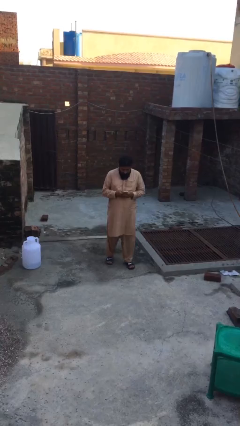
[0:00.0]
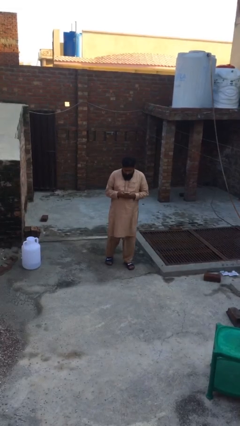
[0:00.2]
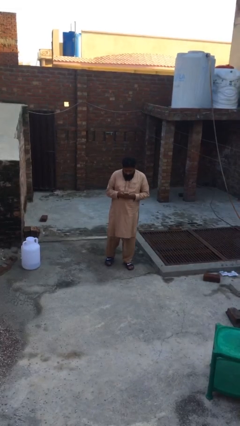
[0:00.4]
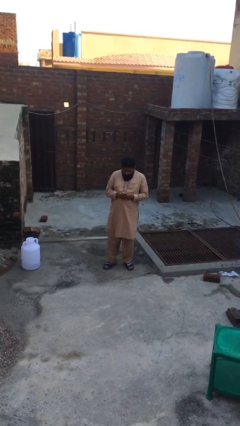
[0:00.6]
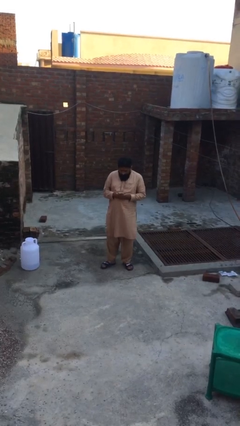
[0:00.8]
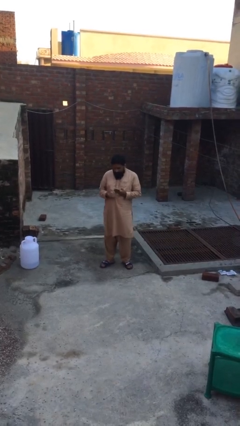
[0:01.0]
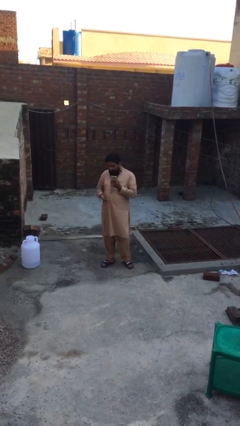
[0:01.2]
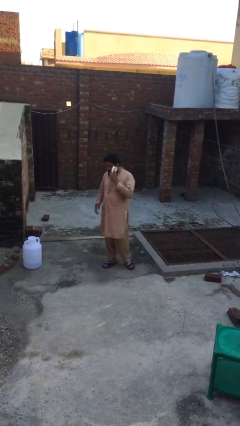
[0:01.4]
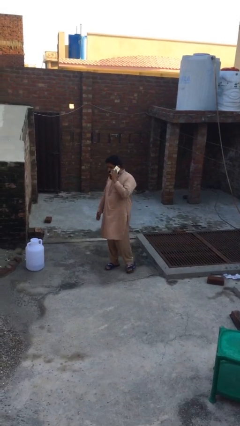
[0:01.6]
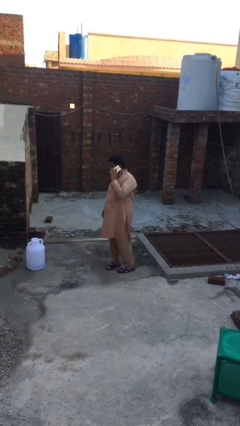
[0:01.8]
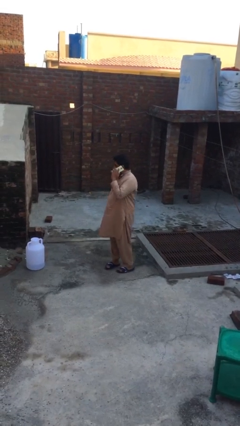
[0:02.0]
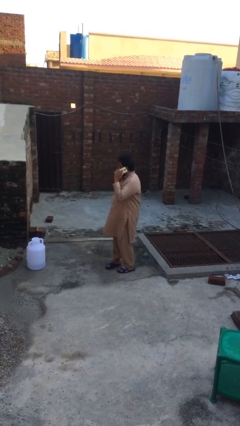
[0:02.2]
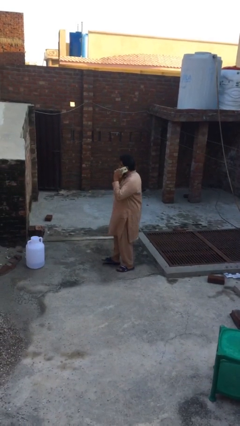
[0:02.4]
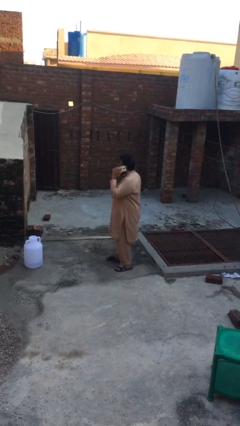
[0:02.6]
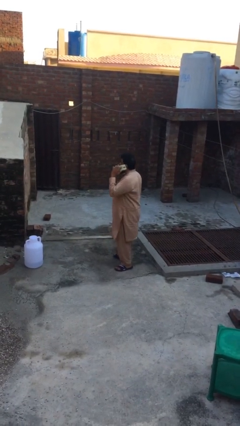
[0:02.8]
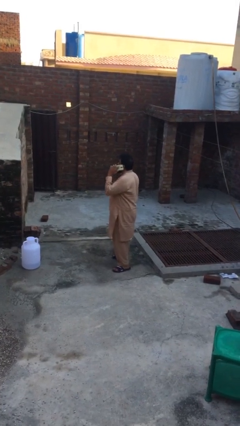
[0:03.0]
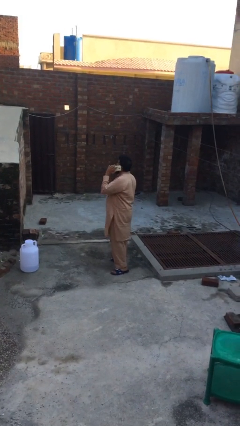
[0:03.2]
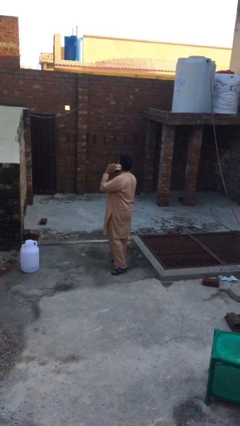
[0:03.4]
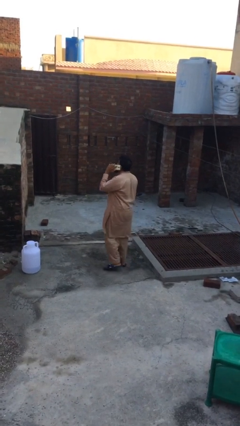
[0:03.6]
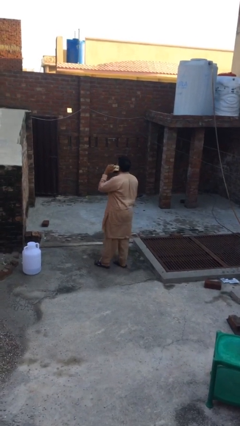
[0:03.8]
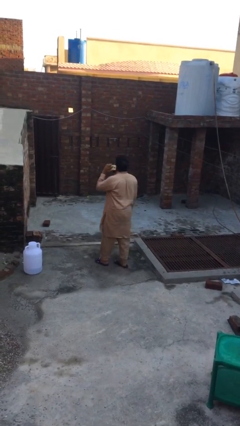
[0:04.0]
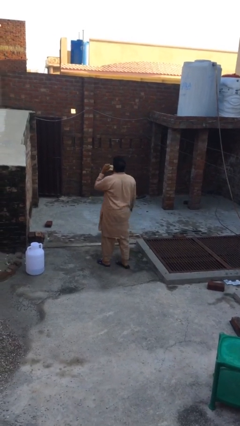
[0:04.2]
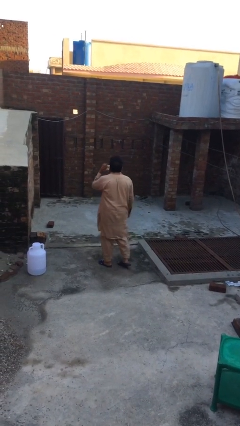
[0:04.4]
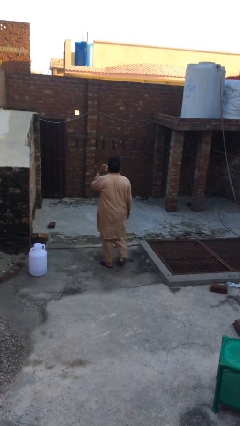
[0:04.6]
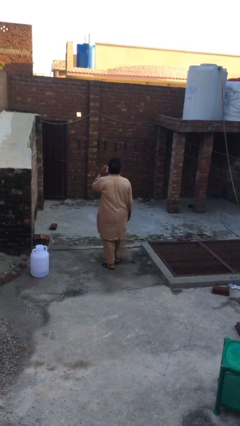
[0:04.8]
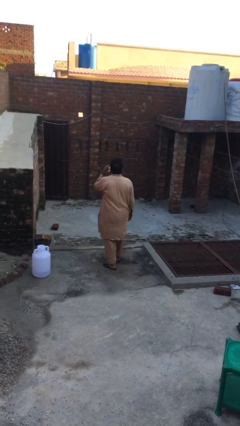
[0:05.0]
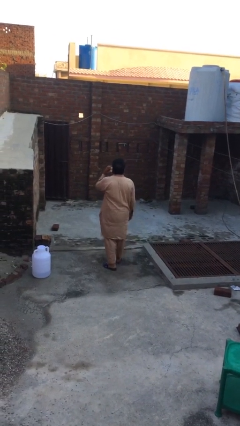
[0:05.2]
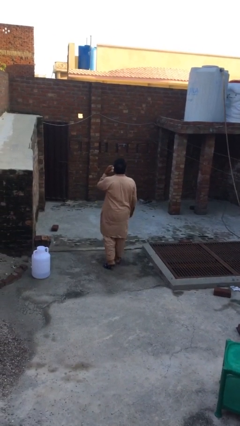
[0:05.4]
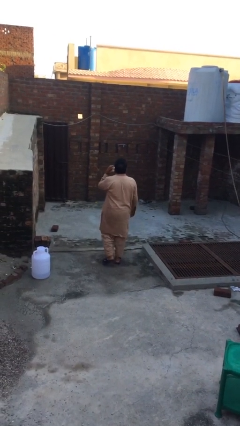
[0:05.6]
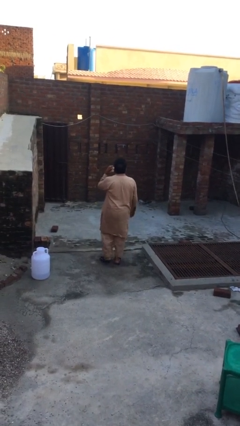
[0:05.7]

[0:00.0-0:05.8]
person talks on phone

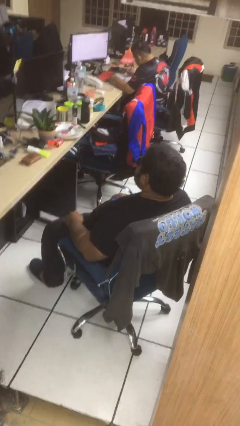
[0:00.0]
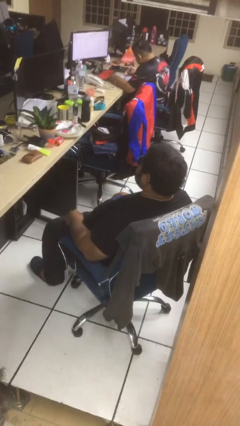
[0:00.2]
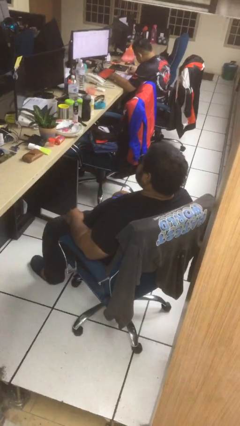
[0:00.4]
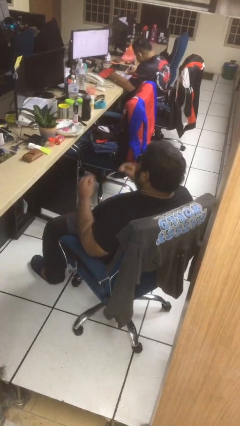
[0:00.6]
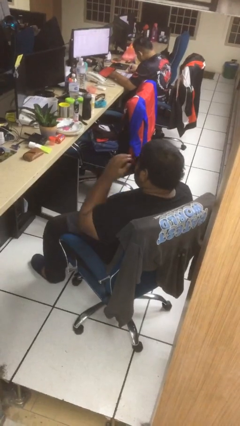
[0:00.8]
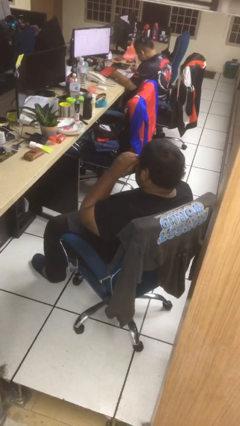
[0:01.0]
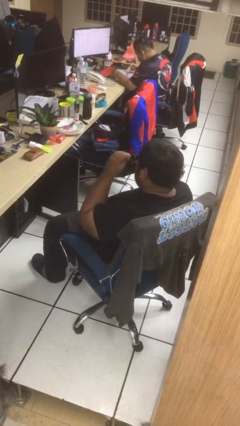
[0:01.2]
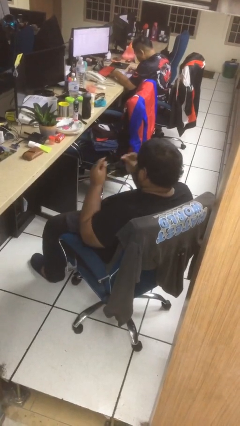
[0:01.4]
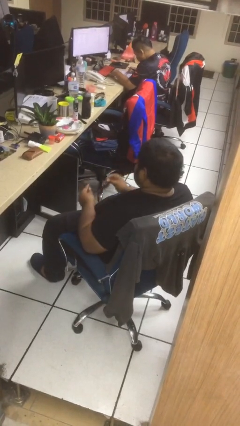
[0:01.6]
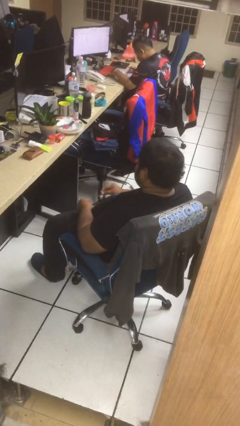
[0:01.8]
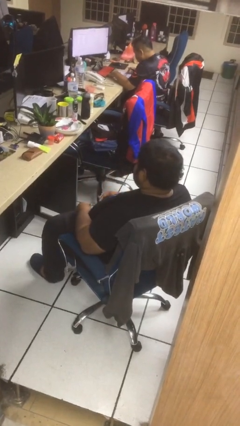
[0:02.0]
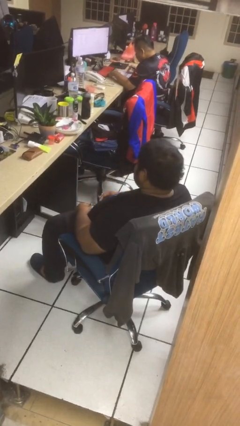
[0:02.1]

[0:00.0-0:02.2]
person takes off sunglasses

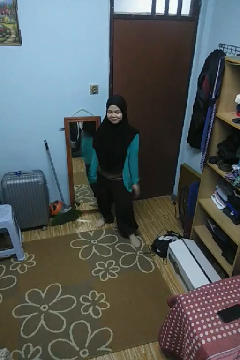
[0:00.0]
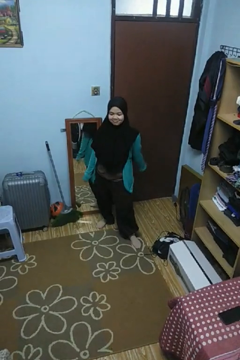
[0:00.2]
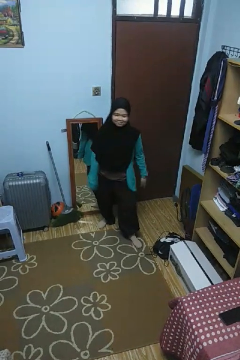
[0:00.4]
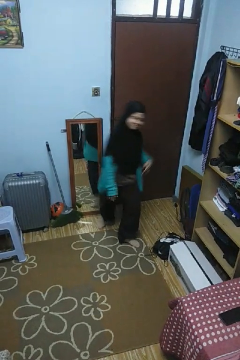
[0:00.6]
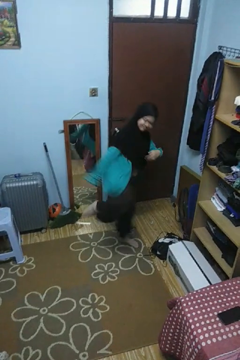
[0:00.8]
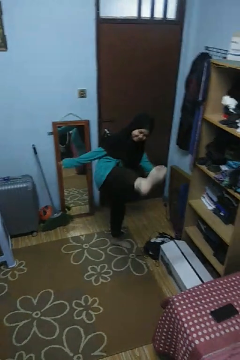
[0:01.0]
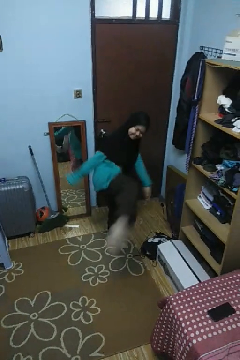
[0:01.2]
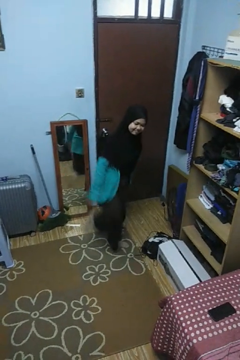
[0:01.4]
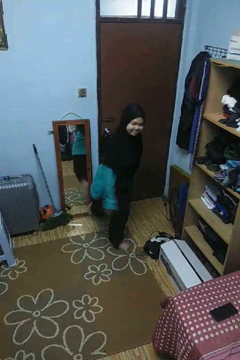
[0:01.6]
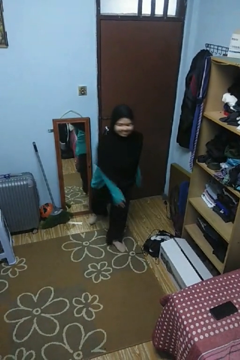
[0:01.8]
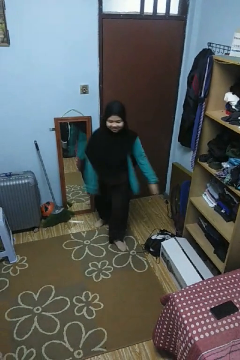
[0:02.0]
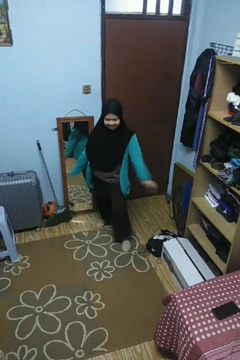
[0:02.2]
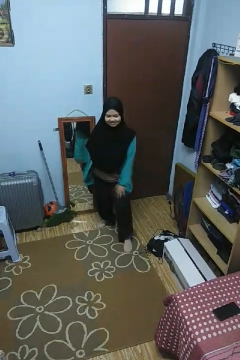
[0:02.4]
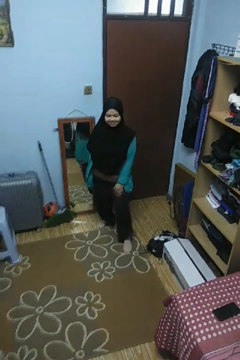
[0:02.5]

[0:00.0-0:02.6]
person karate kicks

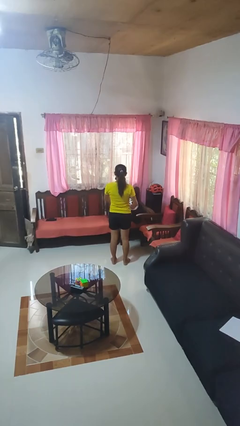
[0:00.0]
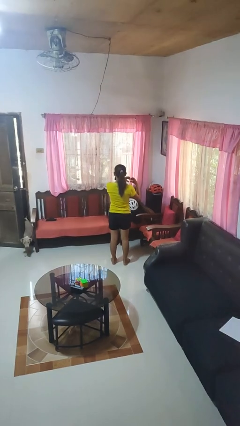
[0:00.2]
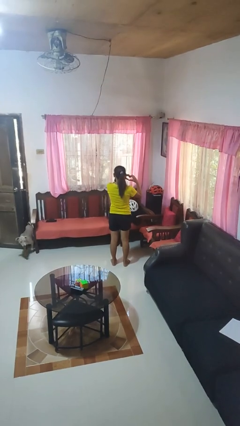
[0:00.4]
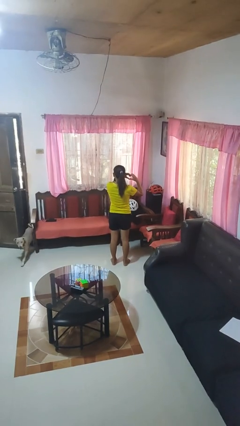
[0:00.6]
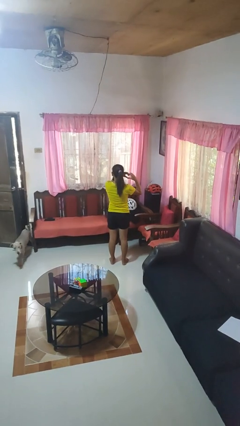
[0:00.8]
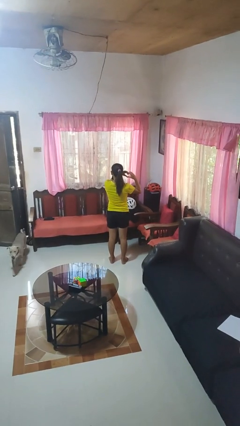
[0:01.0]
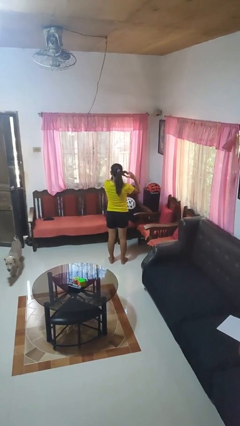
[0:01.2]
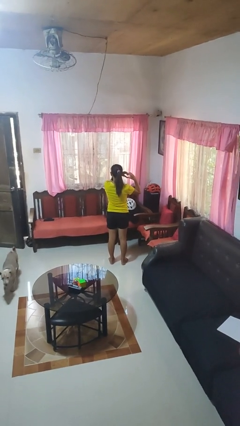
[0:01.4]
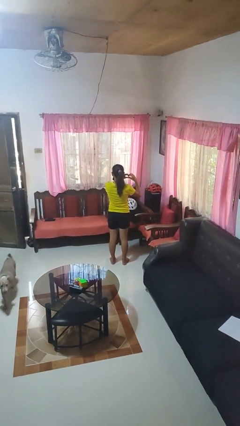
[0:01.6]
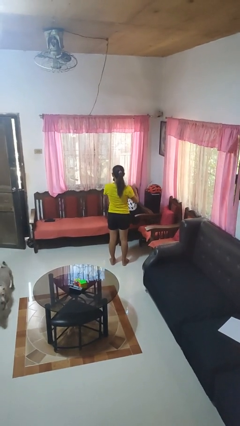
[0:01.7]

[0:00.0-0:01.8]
person gestures heart

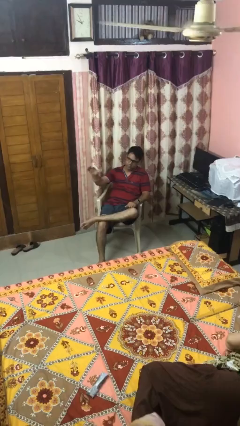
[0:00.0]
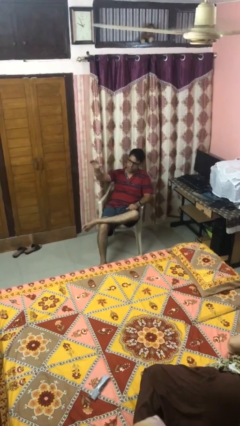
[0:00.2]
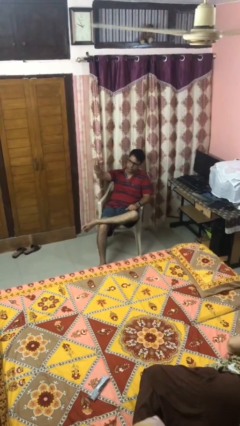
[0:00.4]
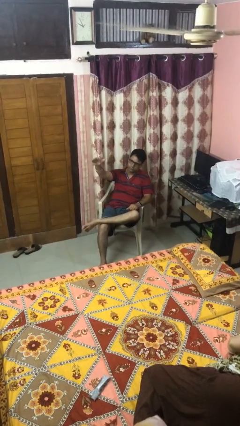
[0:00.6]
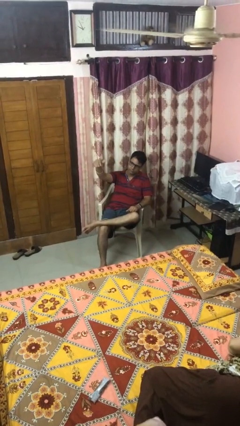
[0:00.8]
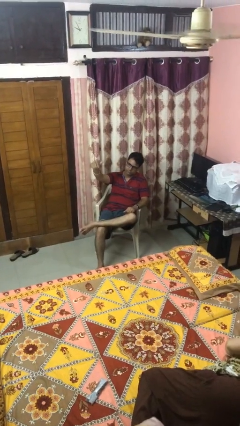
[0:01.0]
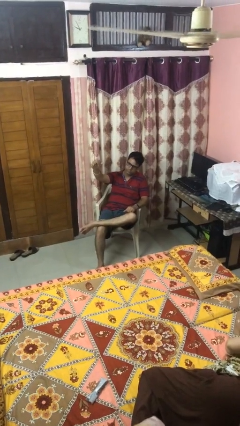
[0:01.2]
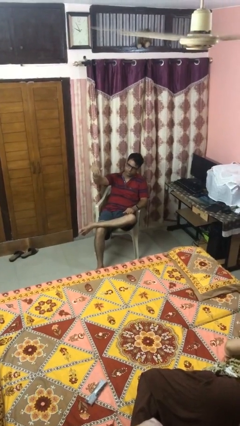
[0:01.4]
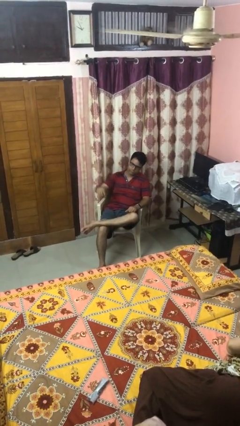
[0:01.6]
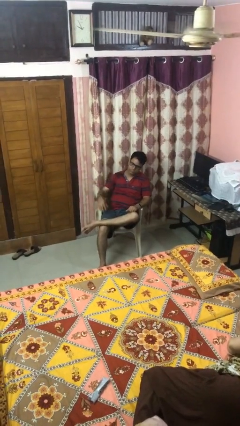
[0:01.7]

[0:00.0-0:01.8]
person gestures come here

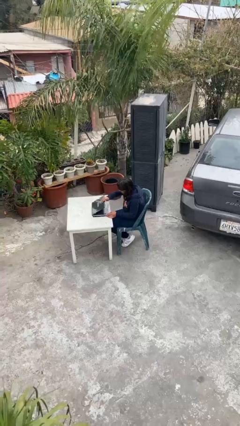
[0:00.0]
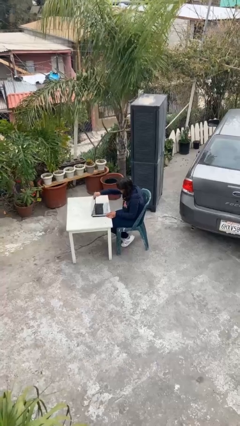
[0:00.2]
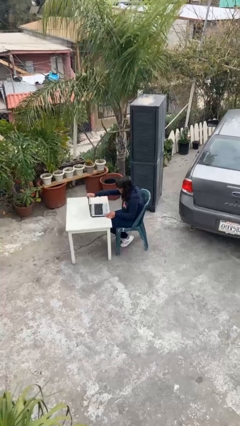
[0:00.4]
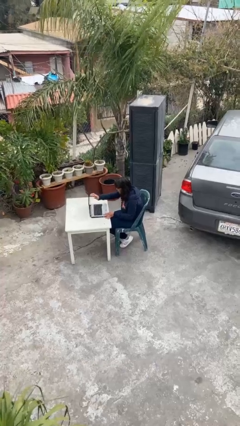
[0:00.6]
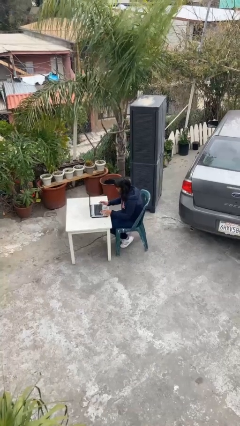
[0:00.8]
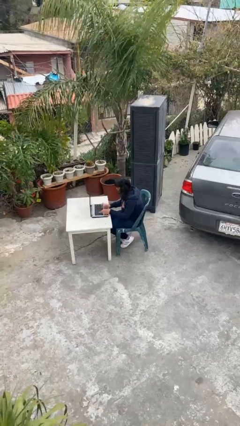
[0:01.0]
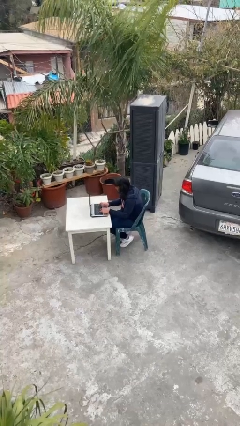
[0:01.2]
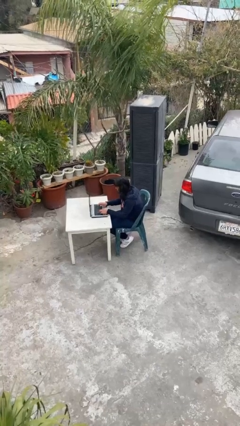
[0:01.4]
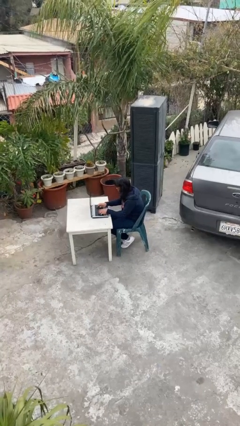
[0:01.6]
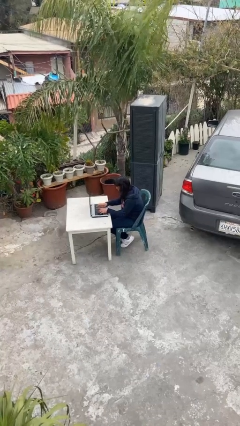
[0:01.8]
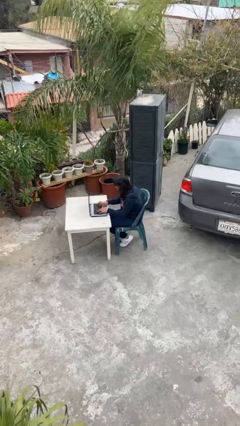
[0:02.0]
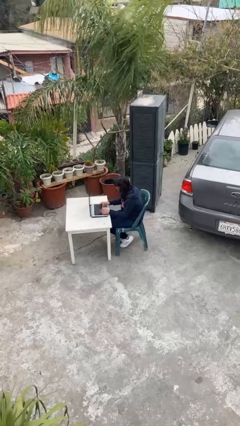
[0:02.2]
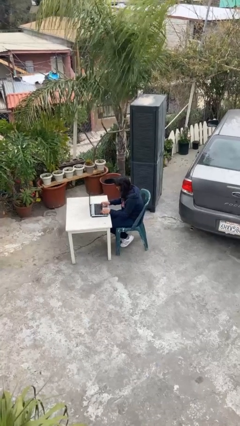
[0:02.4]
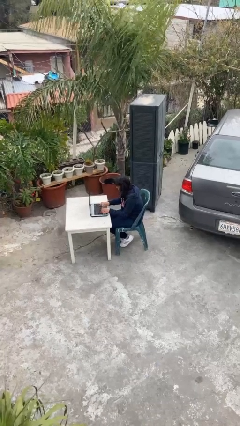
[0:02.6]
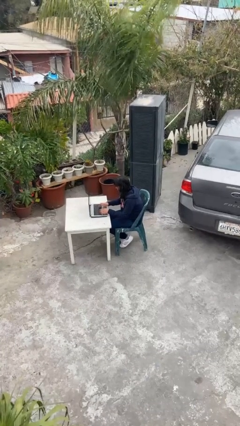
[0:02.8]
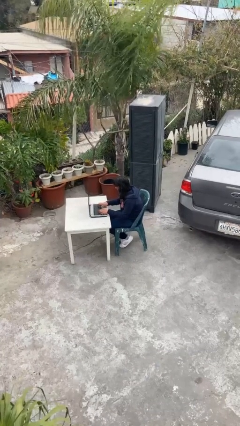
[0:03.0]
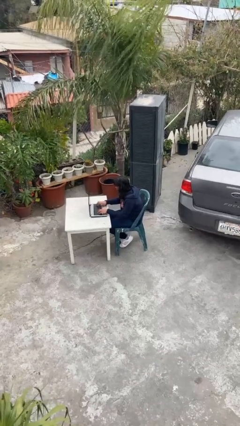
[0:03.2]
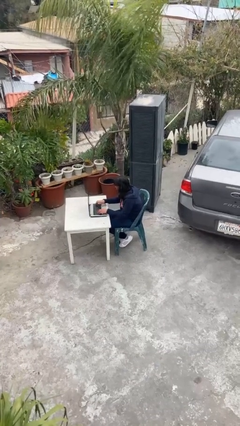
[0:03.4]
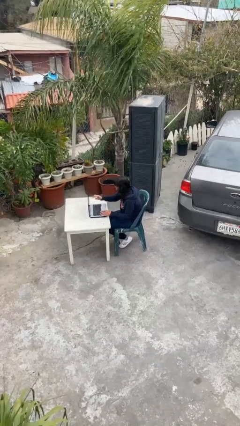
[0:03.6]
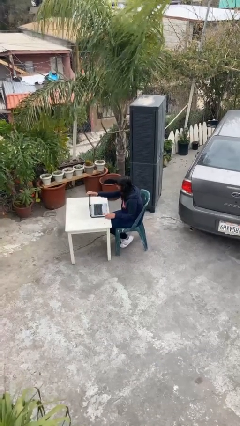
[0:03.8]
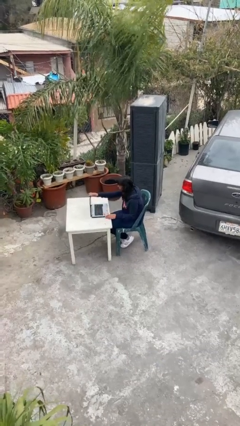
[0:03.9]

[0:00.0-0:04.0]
person interacts with laptop
